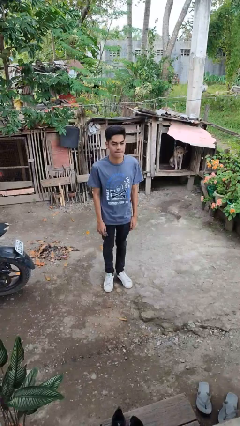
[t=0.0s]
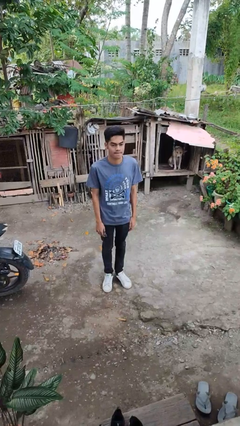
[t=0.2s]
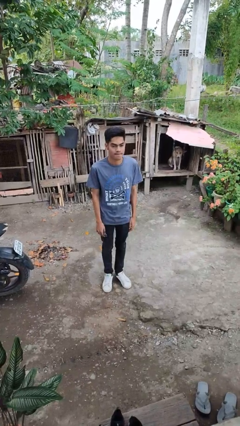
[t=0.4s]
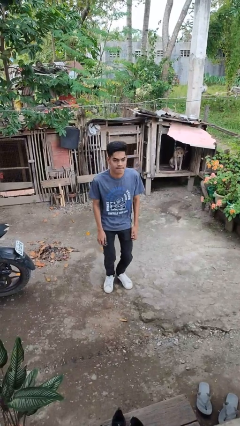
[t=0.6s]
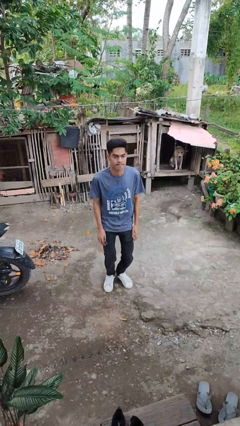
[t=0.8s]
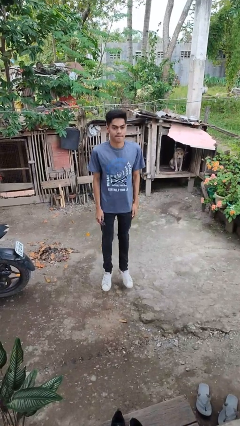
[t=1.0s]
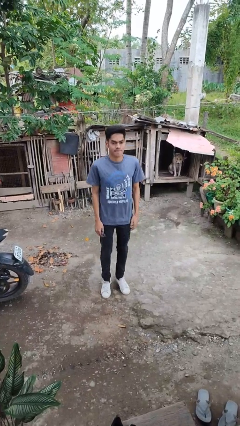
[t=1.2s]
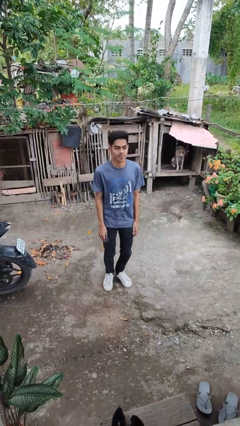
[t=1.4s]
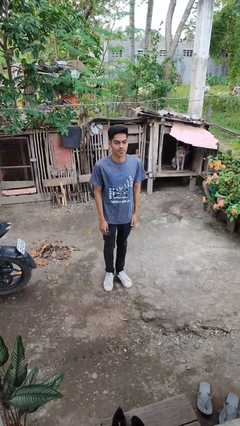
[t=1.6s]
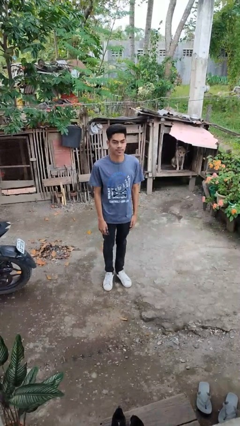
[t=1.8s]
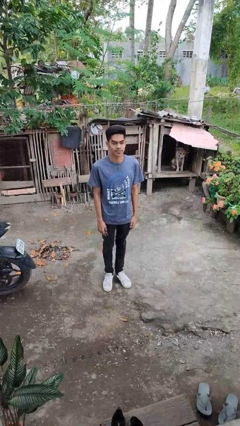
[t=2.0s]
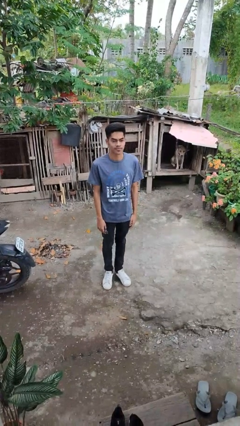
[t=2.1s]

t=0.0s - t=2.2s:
person jumps

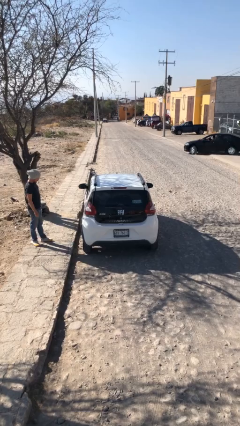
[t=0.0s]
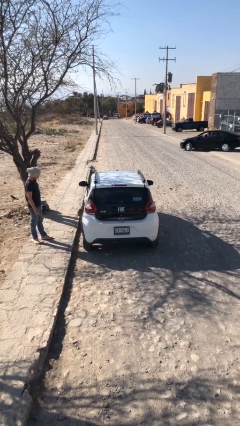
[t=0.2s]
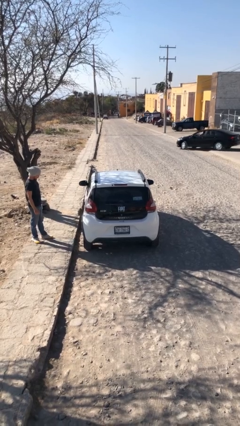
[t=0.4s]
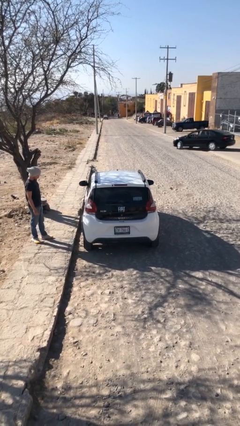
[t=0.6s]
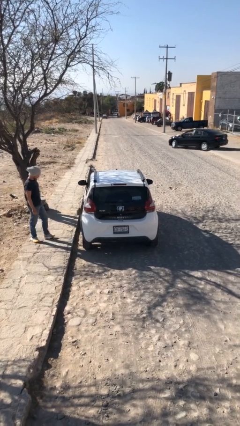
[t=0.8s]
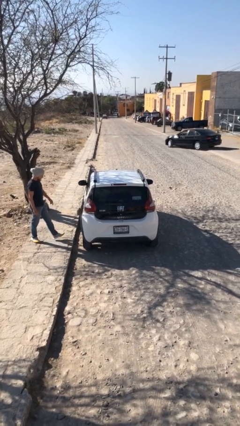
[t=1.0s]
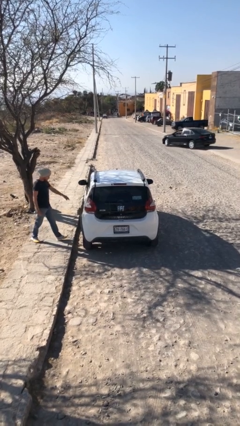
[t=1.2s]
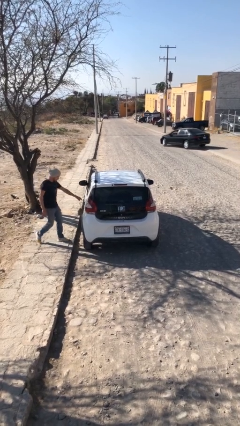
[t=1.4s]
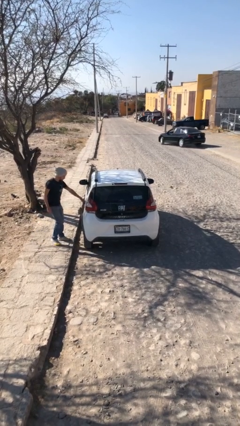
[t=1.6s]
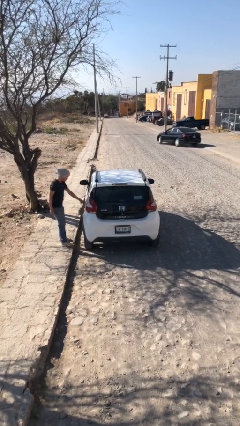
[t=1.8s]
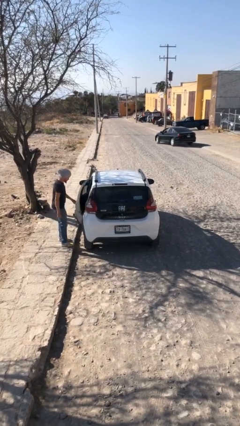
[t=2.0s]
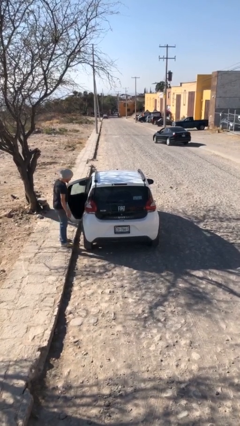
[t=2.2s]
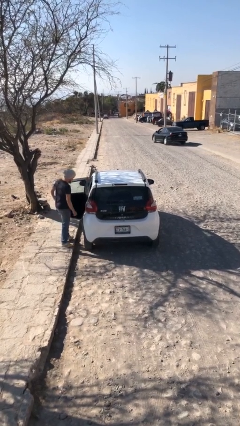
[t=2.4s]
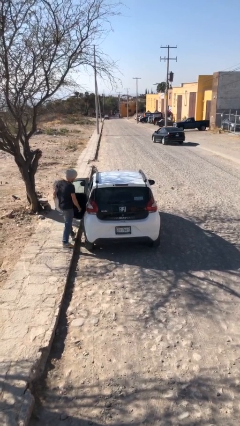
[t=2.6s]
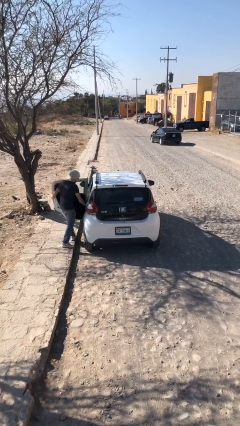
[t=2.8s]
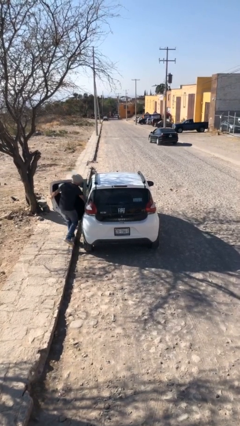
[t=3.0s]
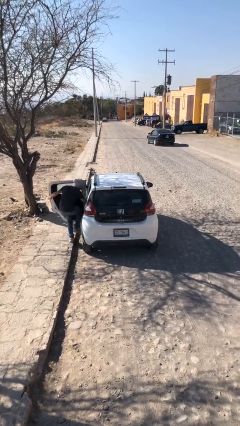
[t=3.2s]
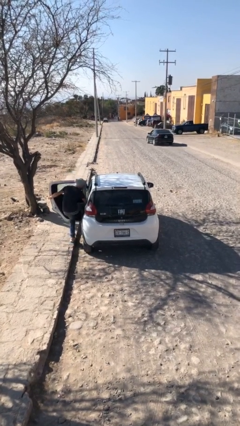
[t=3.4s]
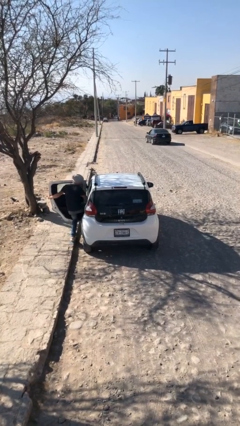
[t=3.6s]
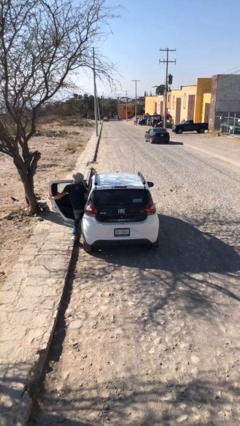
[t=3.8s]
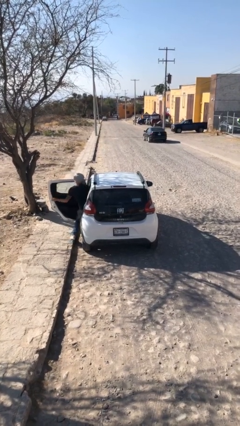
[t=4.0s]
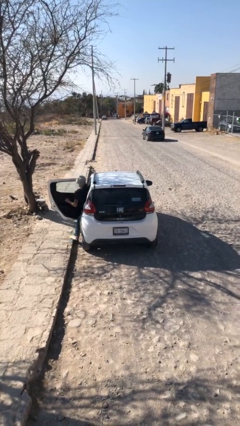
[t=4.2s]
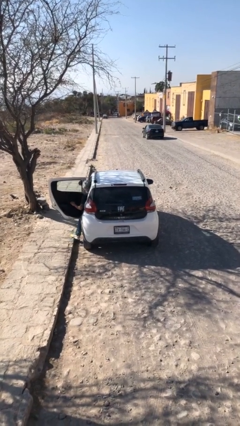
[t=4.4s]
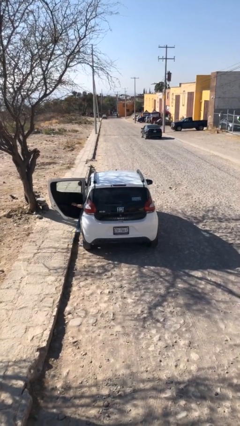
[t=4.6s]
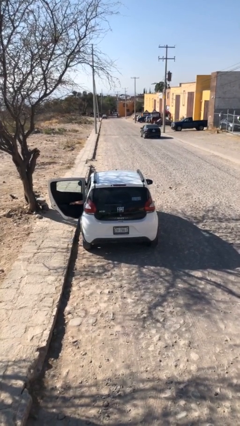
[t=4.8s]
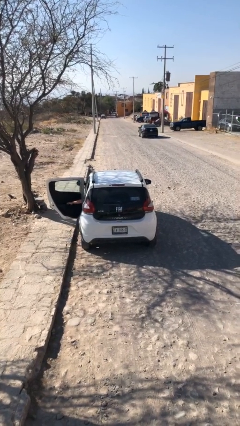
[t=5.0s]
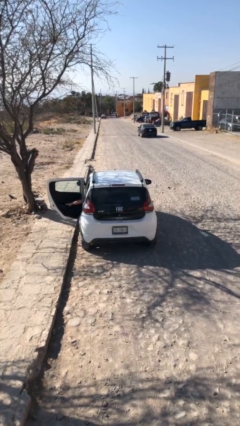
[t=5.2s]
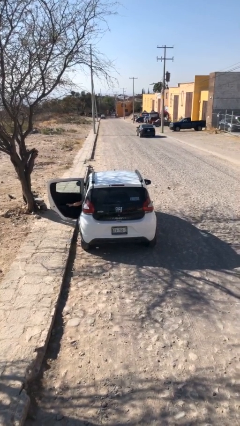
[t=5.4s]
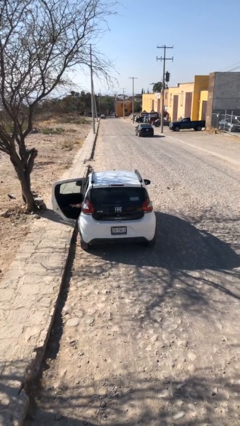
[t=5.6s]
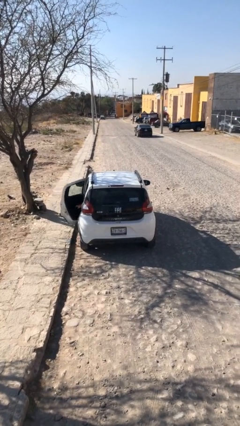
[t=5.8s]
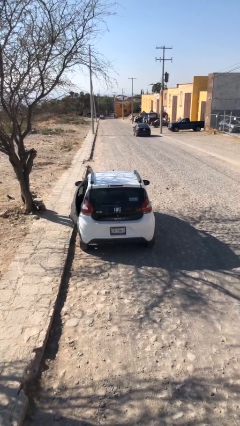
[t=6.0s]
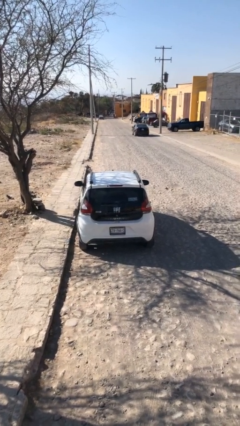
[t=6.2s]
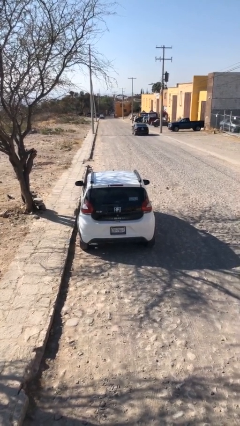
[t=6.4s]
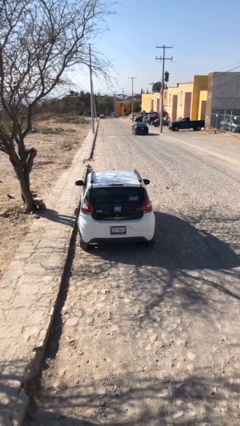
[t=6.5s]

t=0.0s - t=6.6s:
car picks up person

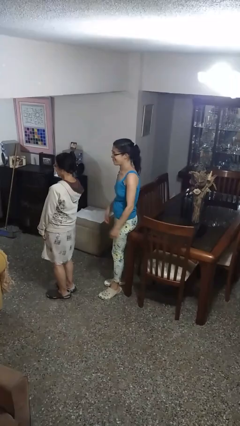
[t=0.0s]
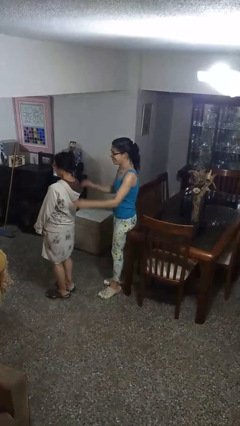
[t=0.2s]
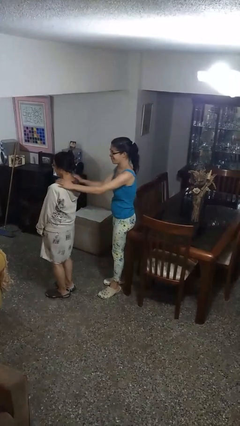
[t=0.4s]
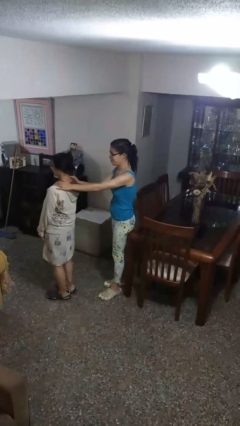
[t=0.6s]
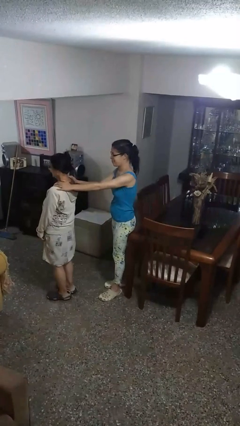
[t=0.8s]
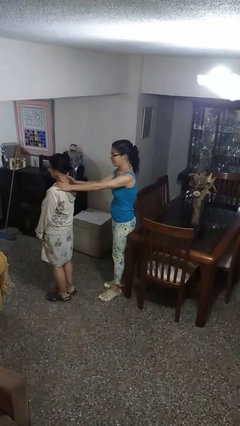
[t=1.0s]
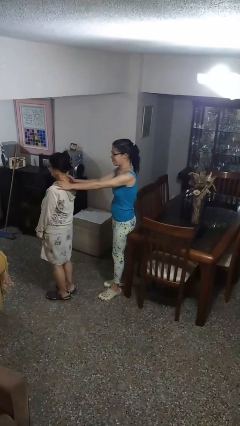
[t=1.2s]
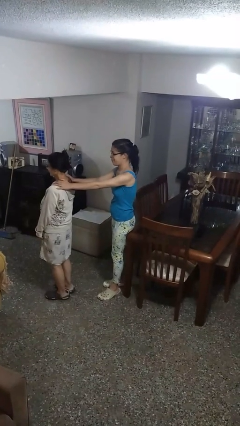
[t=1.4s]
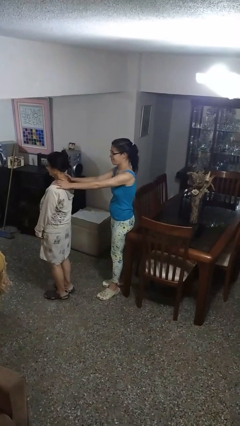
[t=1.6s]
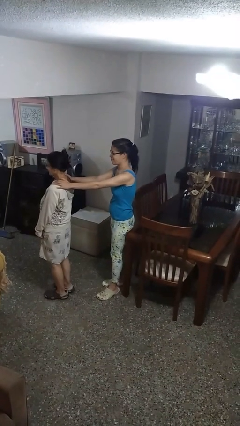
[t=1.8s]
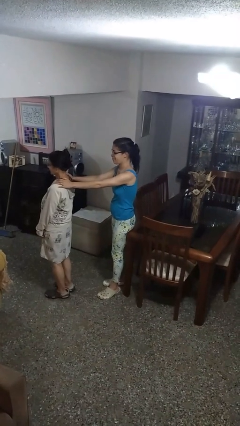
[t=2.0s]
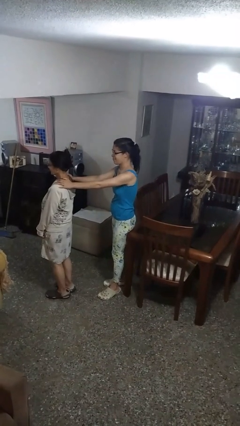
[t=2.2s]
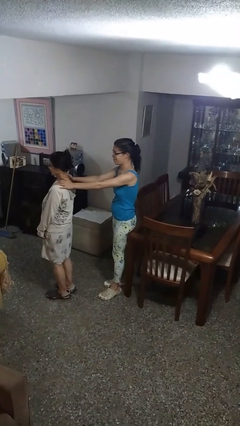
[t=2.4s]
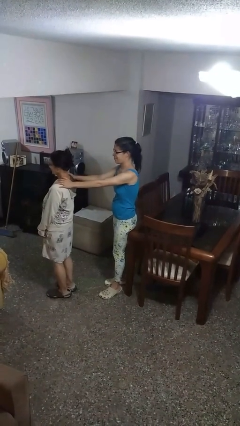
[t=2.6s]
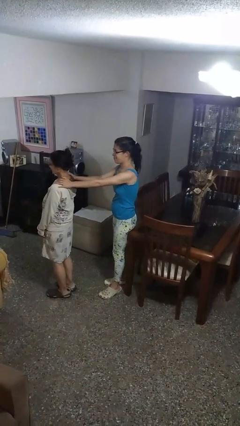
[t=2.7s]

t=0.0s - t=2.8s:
person grabs person by shoulder

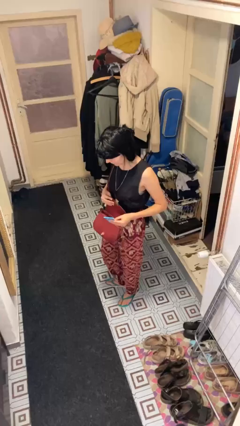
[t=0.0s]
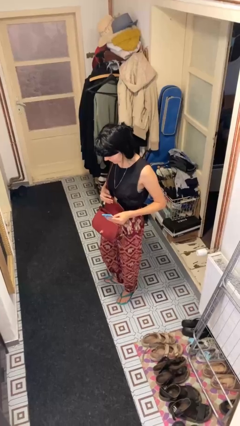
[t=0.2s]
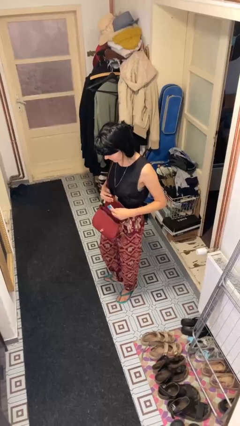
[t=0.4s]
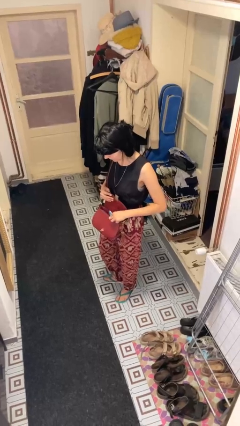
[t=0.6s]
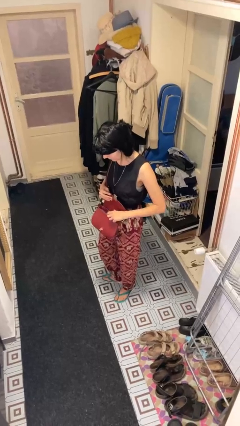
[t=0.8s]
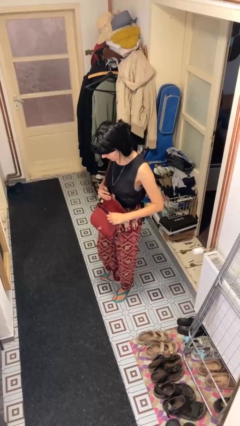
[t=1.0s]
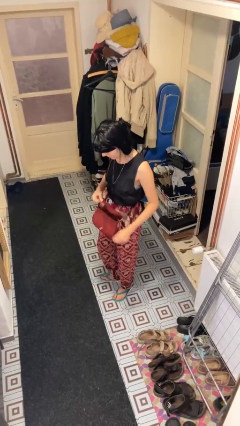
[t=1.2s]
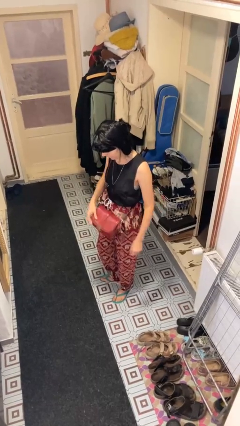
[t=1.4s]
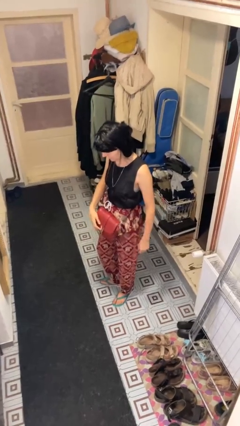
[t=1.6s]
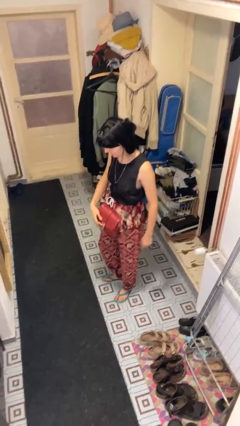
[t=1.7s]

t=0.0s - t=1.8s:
person puts object into purse

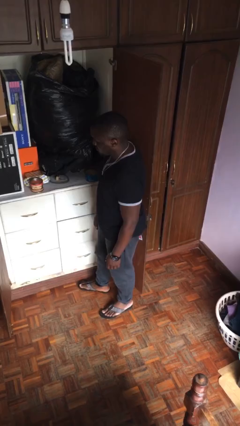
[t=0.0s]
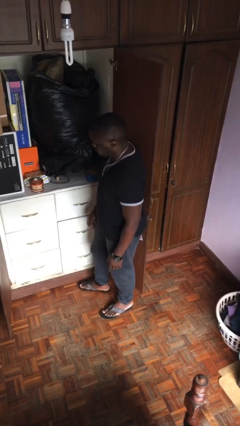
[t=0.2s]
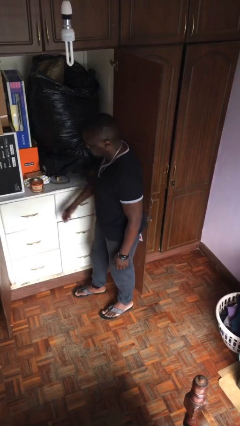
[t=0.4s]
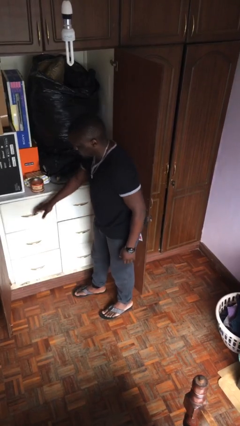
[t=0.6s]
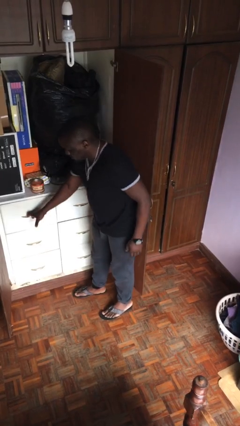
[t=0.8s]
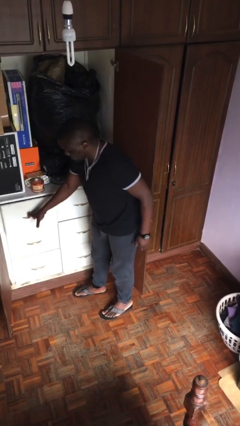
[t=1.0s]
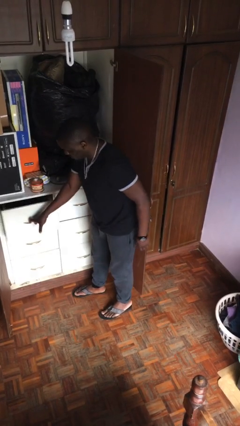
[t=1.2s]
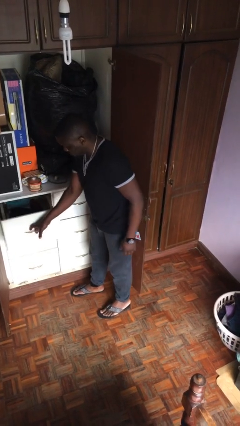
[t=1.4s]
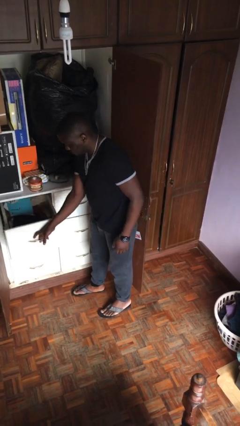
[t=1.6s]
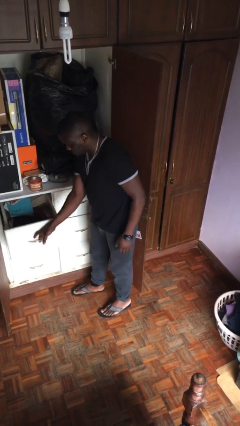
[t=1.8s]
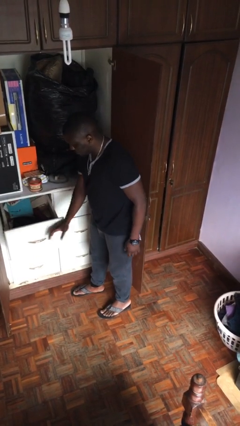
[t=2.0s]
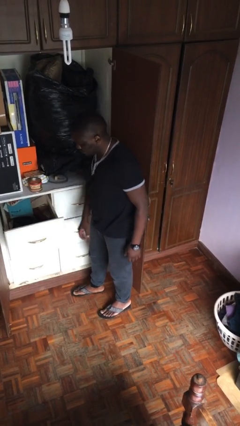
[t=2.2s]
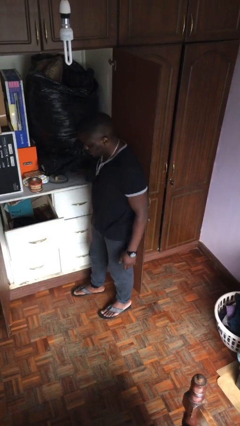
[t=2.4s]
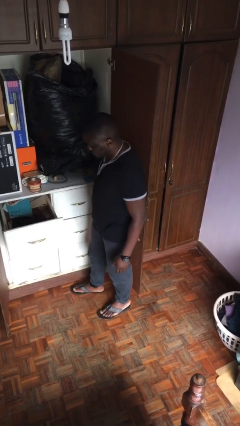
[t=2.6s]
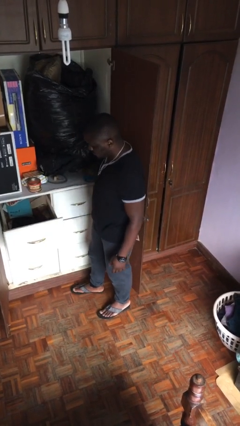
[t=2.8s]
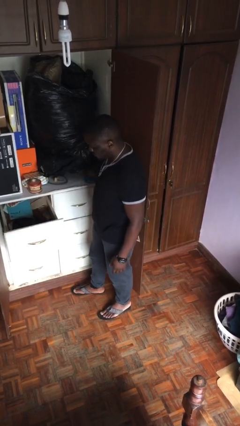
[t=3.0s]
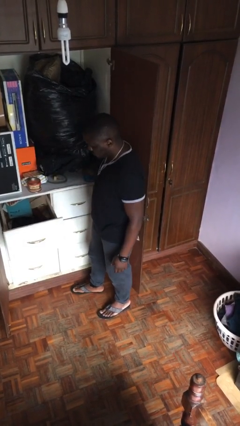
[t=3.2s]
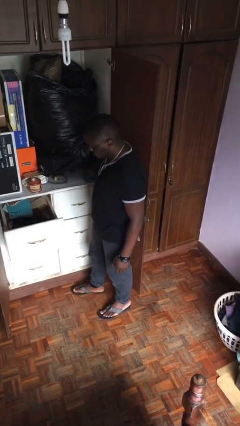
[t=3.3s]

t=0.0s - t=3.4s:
person opens dresser drawer

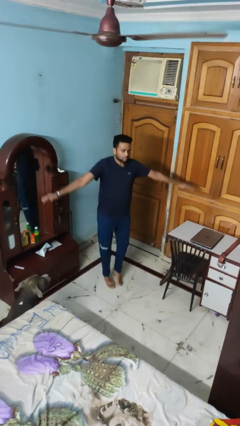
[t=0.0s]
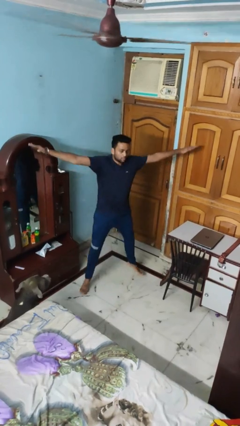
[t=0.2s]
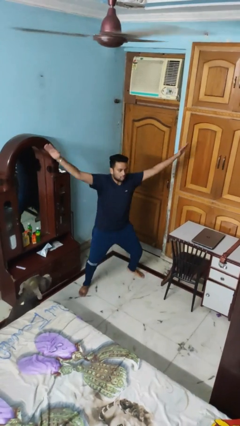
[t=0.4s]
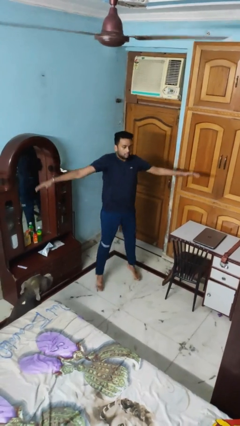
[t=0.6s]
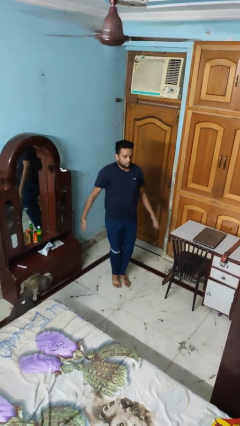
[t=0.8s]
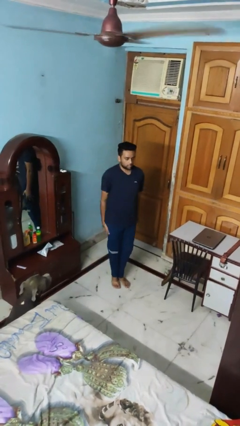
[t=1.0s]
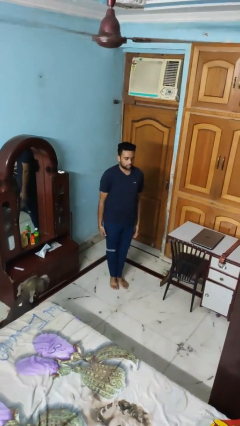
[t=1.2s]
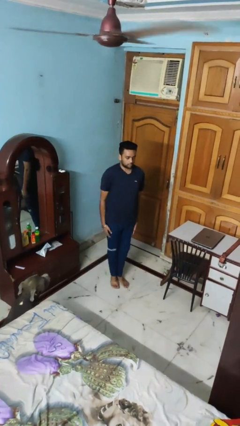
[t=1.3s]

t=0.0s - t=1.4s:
person exercises with jumping jacks
